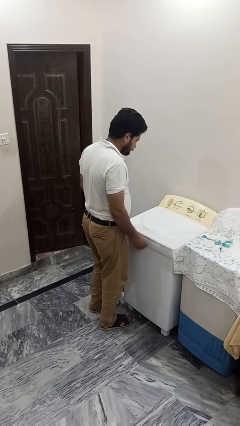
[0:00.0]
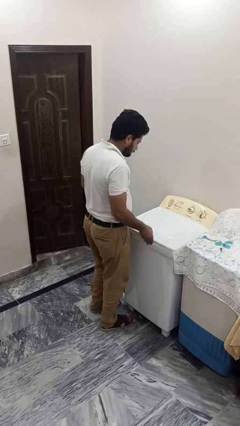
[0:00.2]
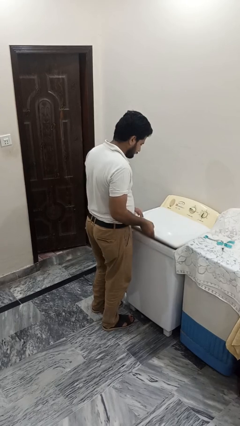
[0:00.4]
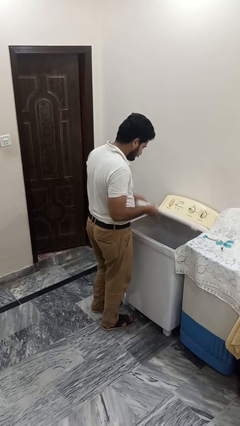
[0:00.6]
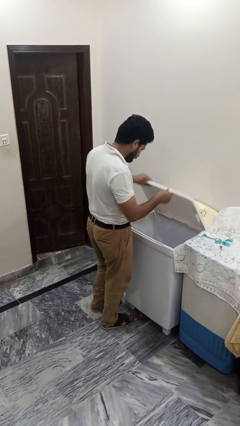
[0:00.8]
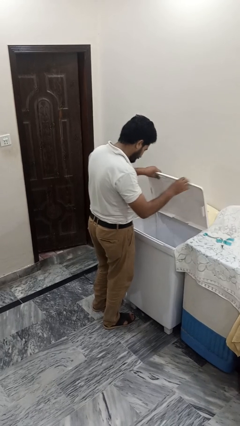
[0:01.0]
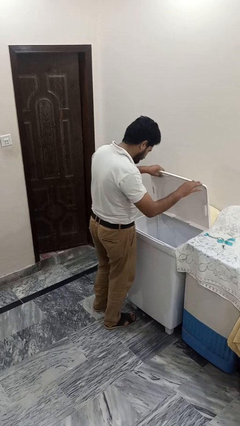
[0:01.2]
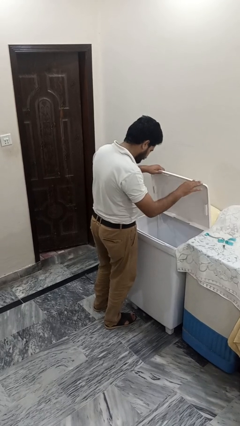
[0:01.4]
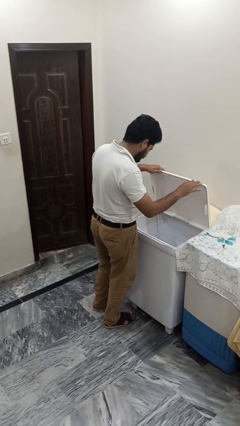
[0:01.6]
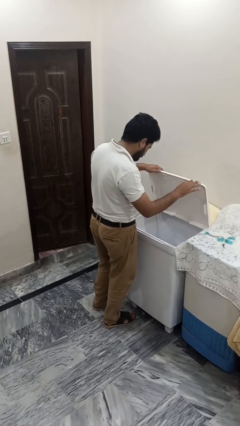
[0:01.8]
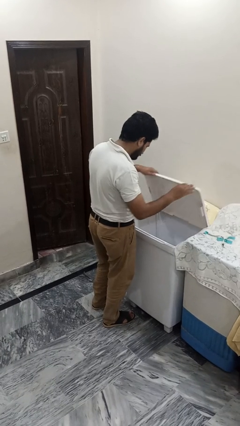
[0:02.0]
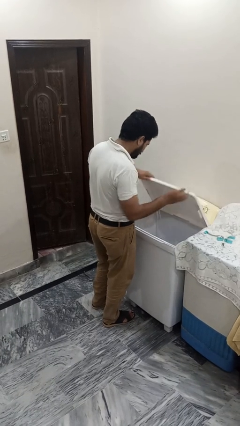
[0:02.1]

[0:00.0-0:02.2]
person opens clothes washer

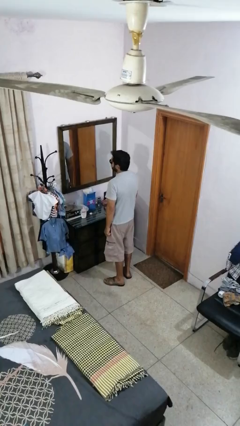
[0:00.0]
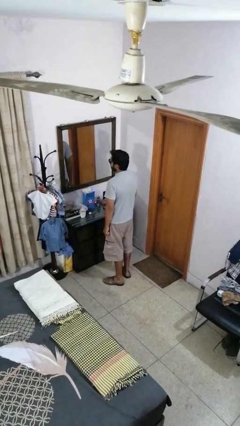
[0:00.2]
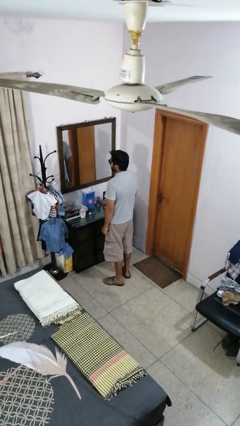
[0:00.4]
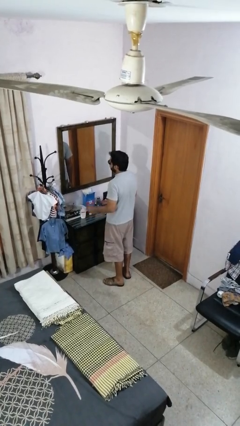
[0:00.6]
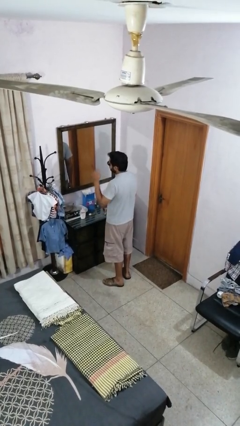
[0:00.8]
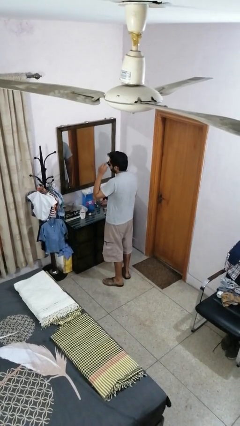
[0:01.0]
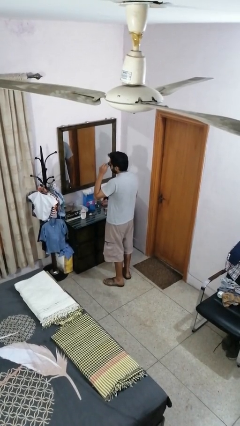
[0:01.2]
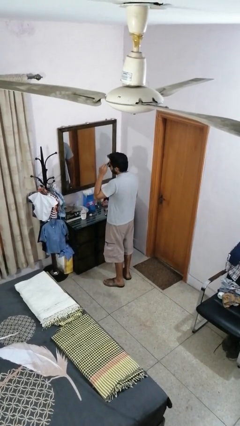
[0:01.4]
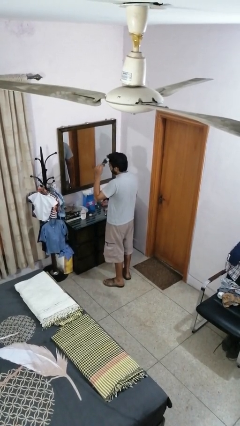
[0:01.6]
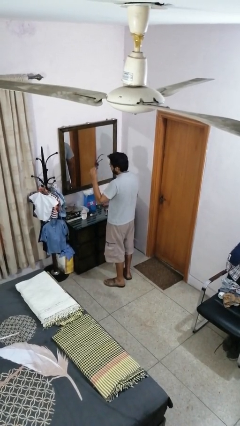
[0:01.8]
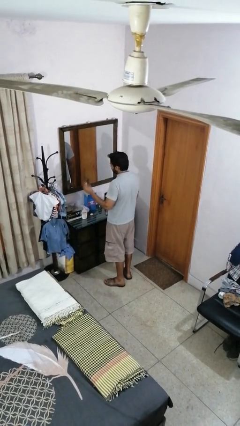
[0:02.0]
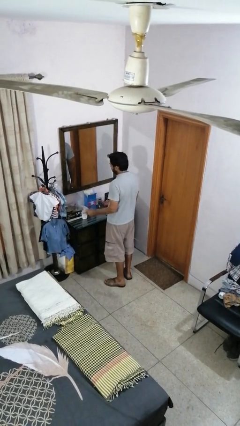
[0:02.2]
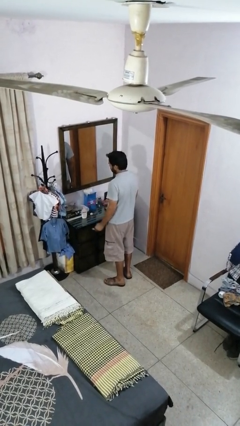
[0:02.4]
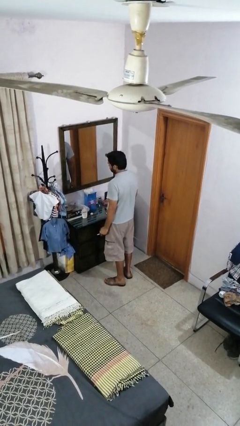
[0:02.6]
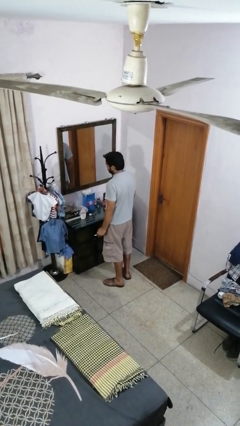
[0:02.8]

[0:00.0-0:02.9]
person takes off sunglasses

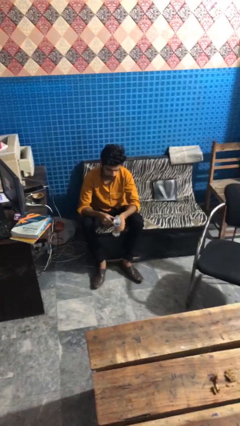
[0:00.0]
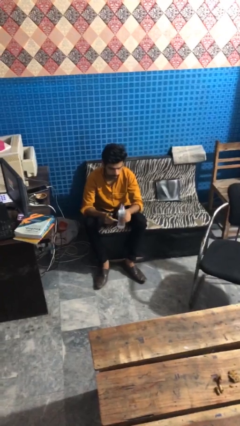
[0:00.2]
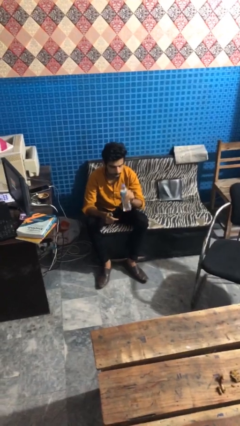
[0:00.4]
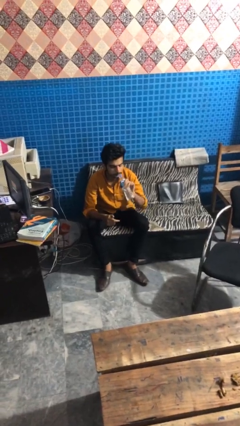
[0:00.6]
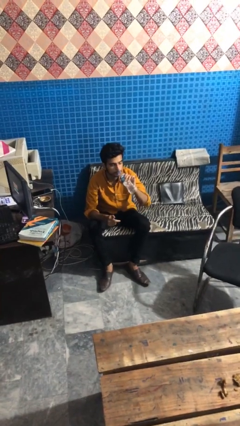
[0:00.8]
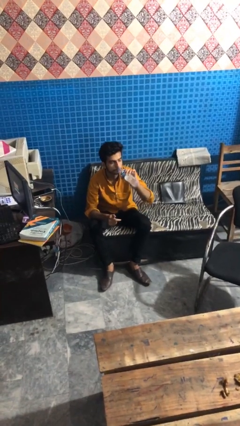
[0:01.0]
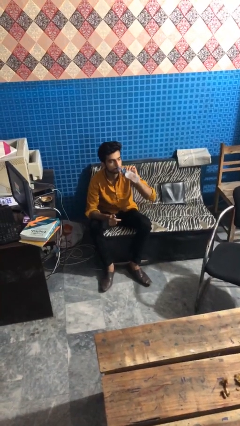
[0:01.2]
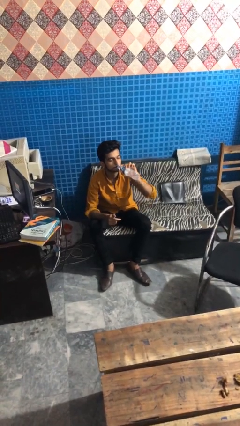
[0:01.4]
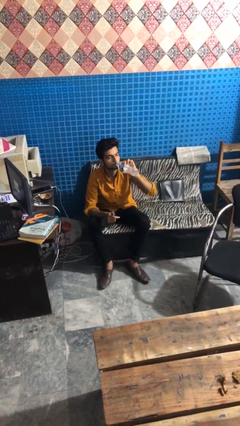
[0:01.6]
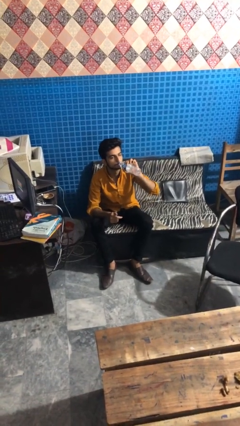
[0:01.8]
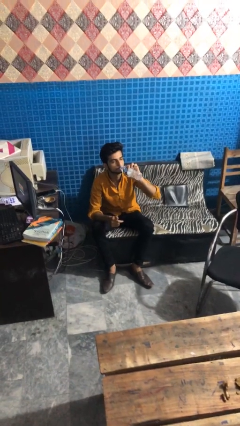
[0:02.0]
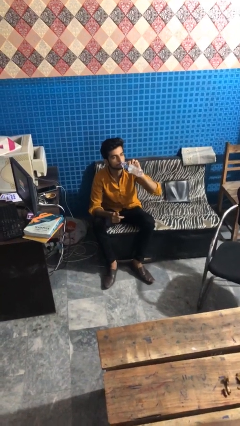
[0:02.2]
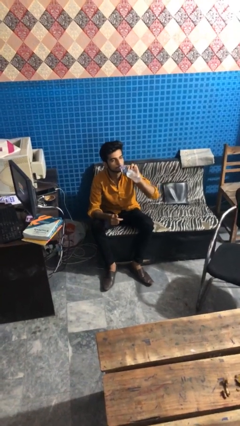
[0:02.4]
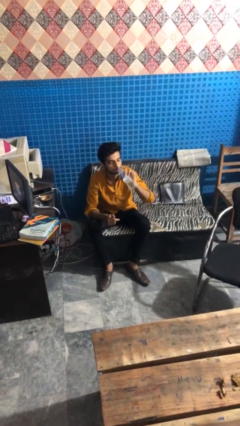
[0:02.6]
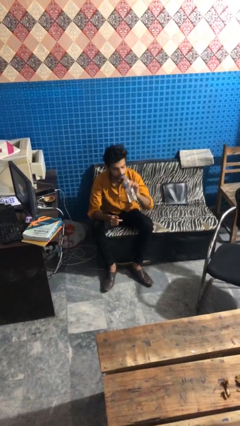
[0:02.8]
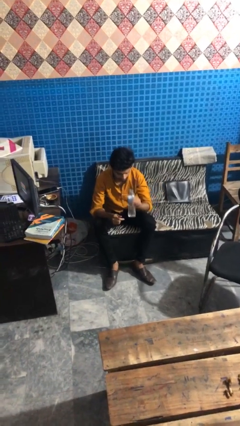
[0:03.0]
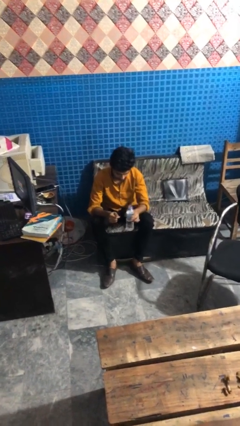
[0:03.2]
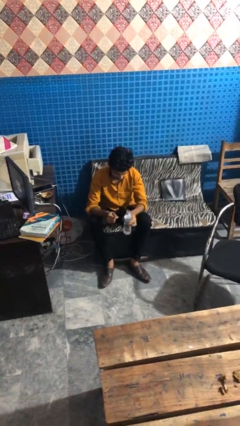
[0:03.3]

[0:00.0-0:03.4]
person drinks from bottle

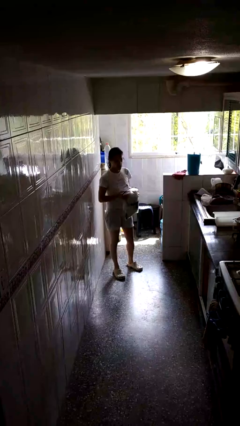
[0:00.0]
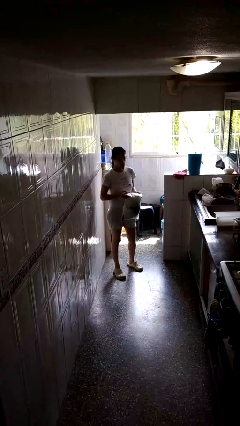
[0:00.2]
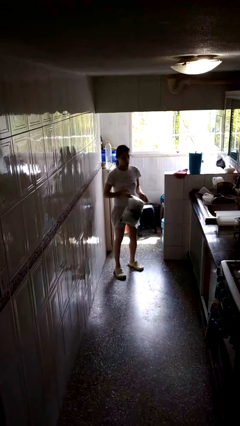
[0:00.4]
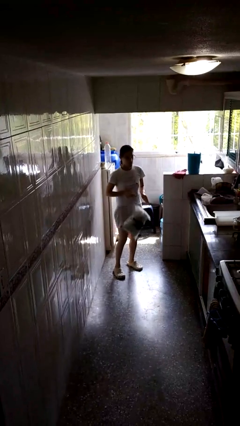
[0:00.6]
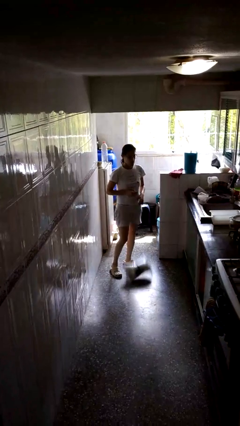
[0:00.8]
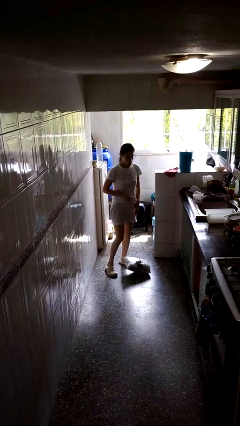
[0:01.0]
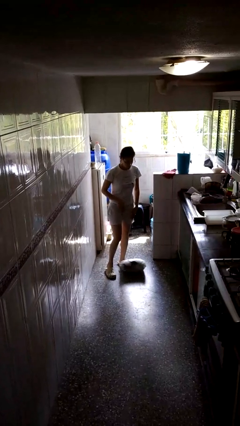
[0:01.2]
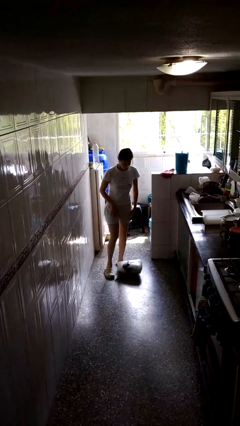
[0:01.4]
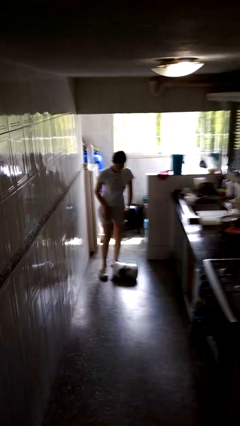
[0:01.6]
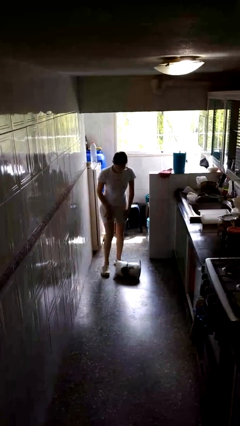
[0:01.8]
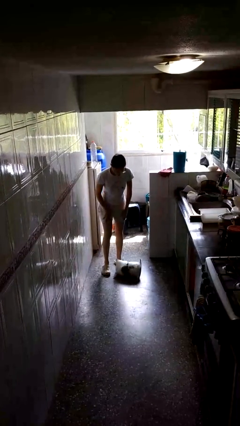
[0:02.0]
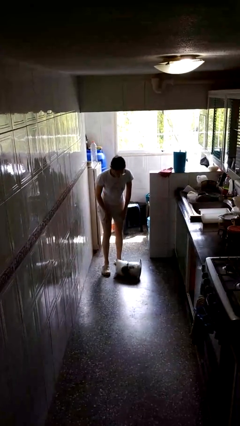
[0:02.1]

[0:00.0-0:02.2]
person drops object

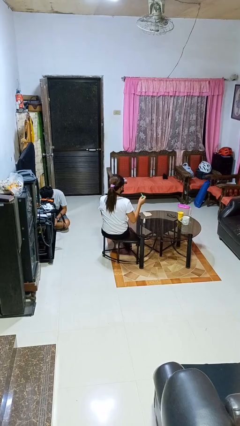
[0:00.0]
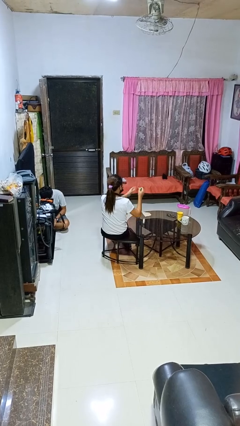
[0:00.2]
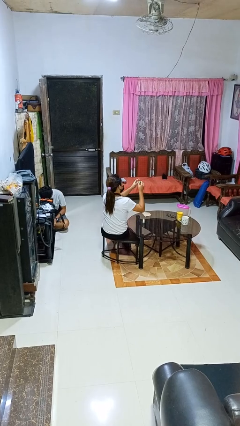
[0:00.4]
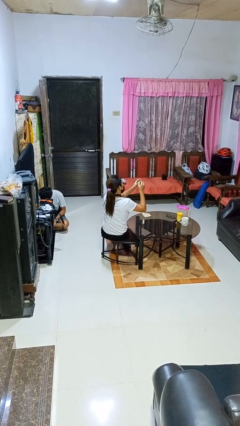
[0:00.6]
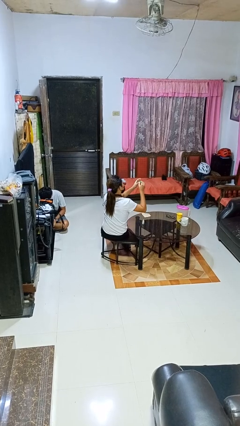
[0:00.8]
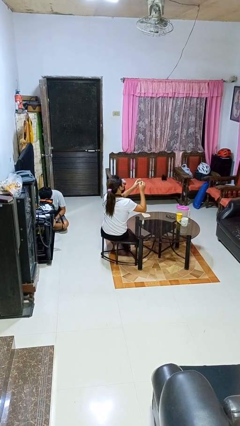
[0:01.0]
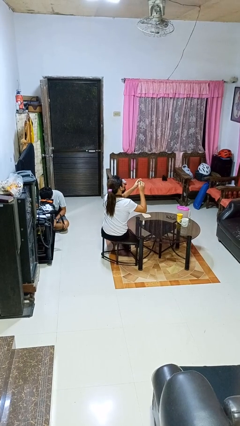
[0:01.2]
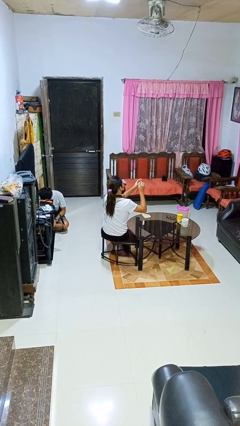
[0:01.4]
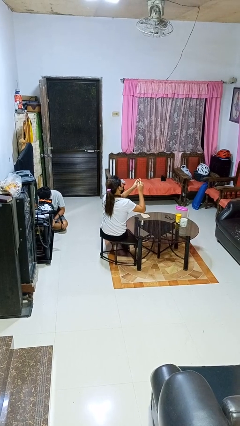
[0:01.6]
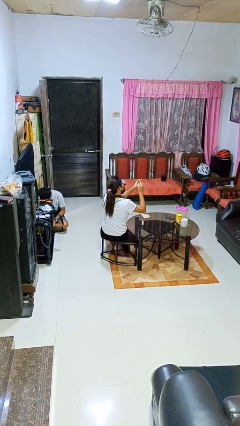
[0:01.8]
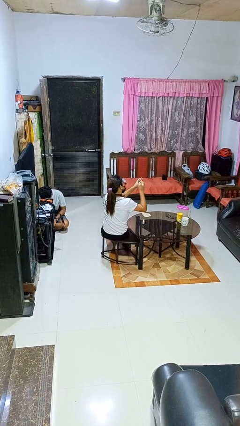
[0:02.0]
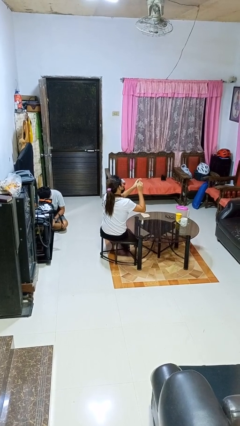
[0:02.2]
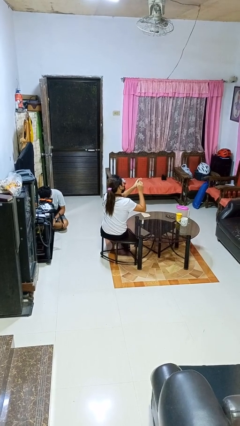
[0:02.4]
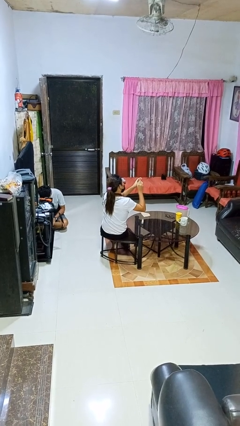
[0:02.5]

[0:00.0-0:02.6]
person paints fingernails

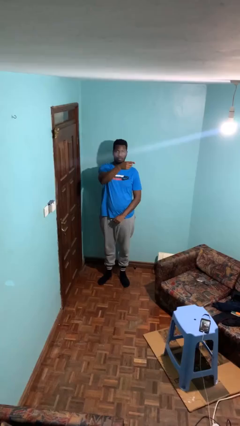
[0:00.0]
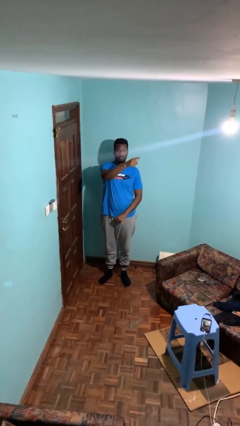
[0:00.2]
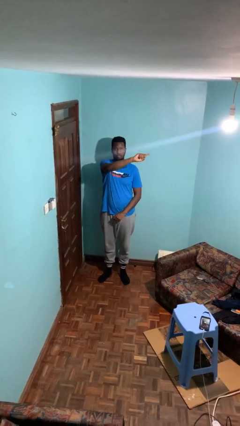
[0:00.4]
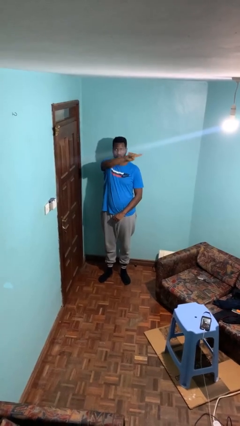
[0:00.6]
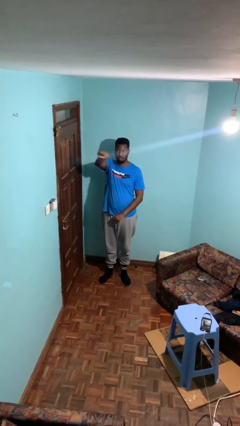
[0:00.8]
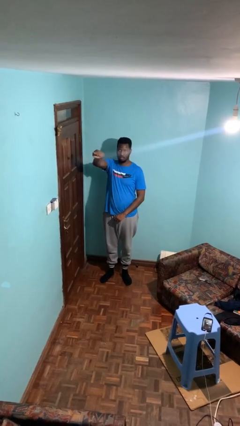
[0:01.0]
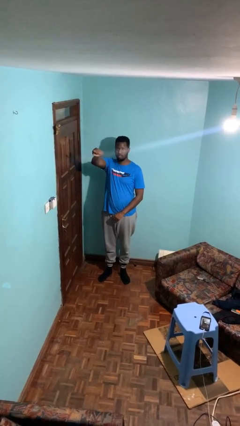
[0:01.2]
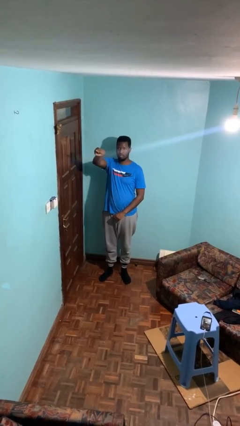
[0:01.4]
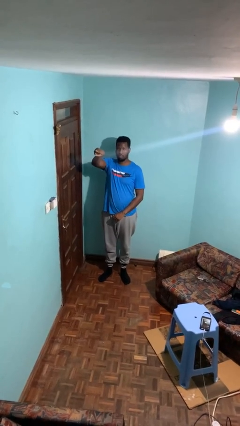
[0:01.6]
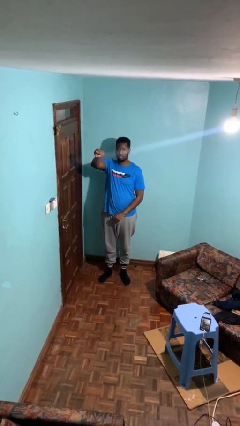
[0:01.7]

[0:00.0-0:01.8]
person gestures swipe right

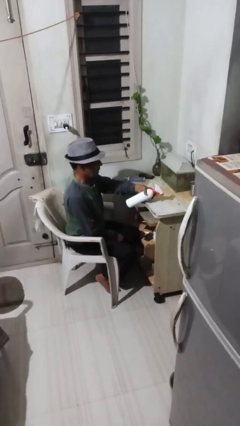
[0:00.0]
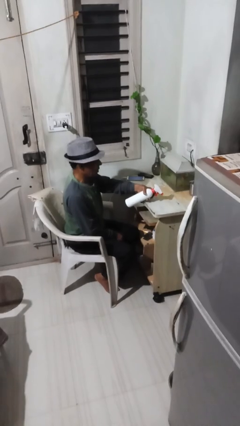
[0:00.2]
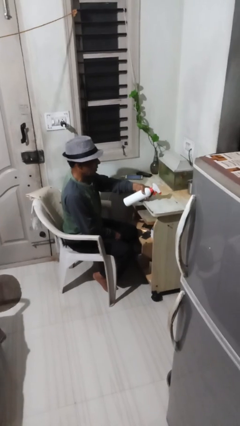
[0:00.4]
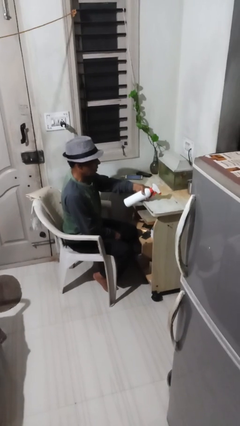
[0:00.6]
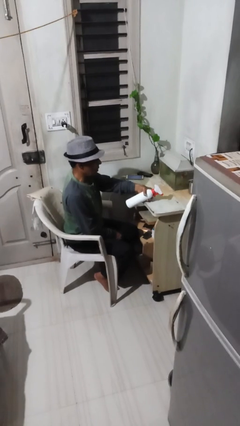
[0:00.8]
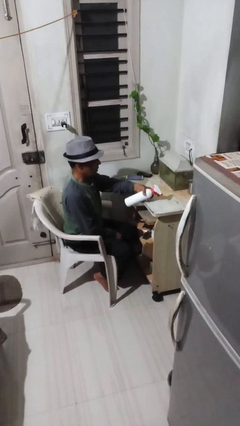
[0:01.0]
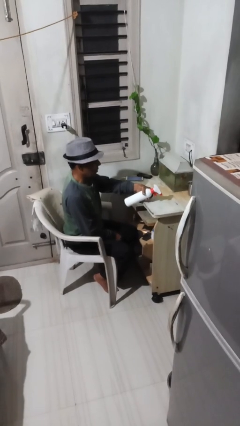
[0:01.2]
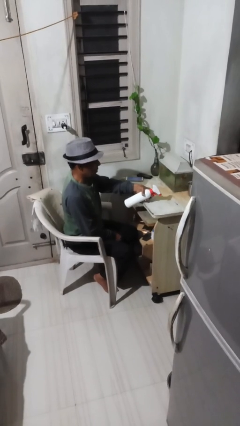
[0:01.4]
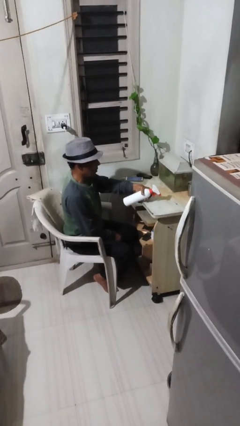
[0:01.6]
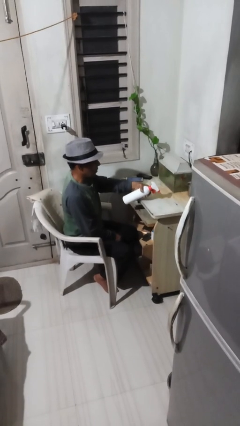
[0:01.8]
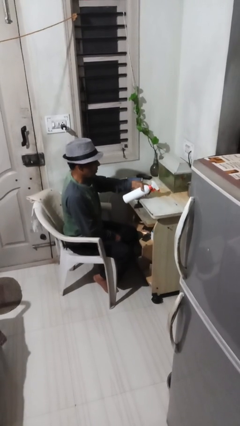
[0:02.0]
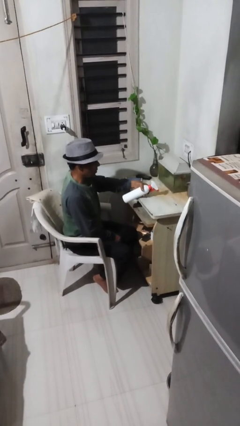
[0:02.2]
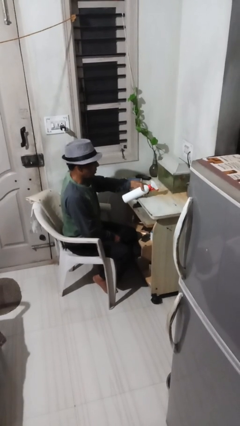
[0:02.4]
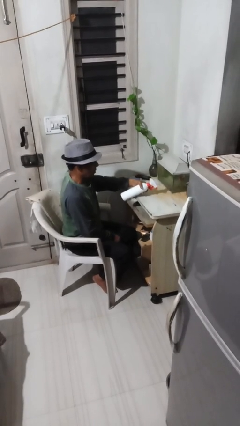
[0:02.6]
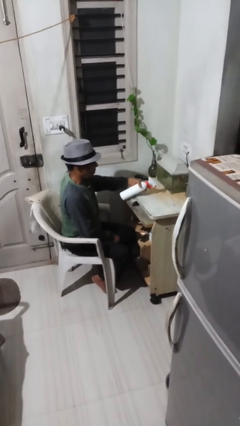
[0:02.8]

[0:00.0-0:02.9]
person sprays from bottle
